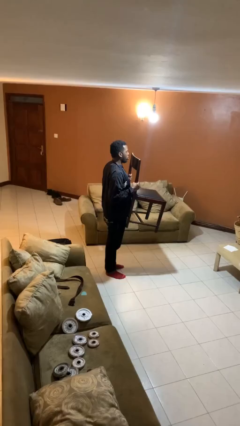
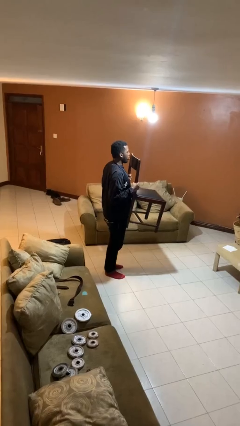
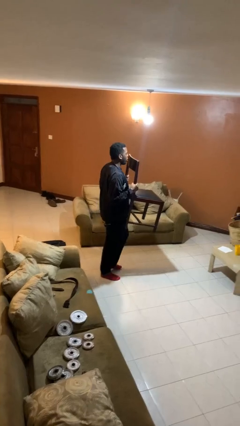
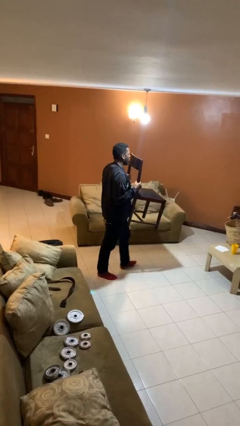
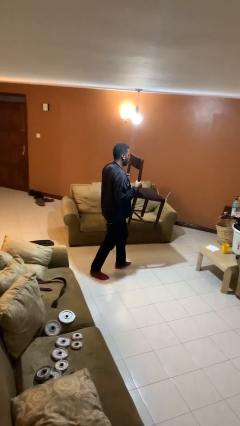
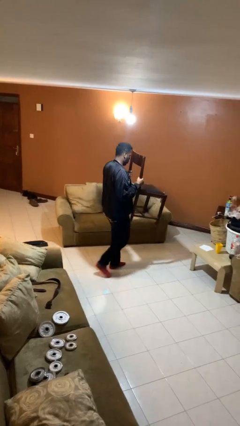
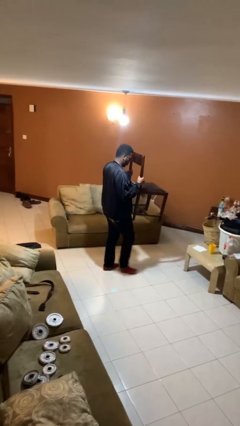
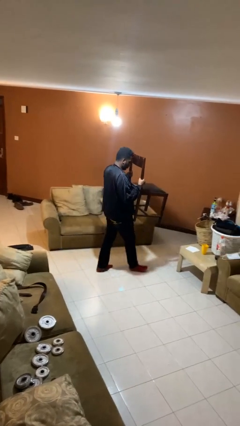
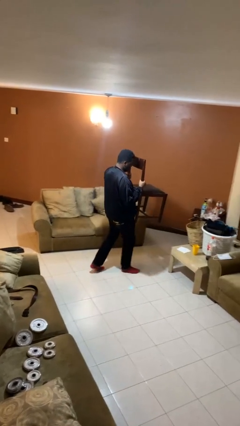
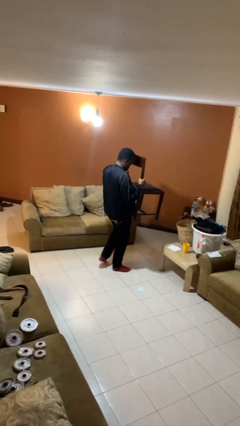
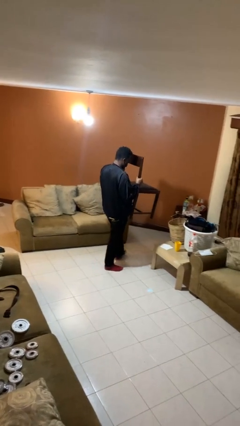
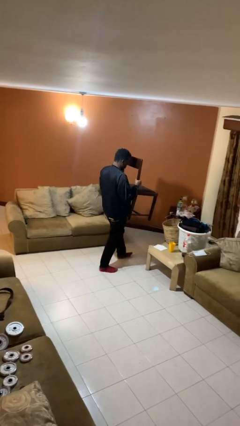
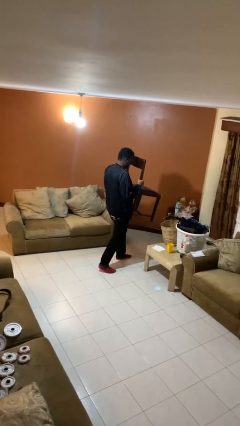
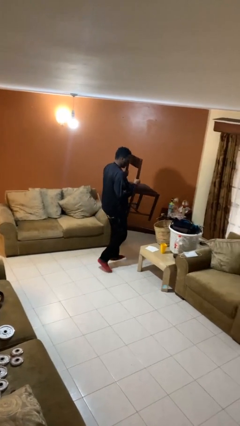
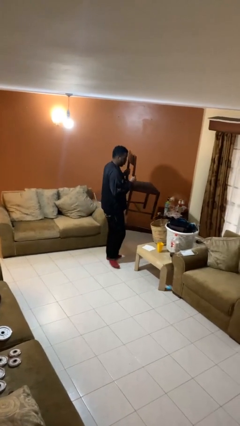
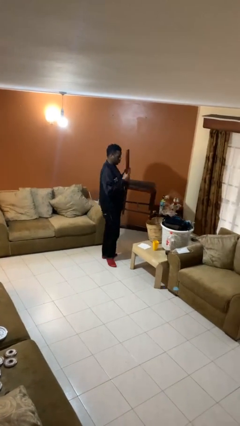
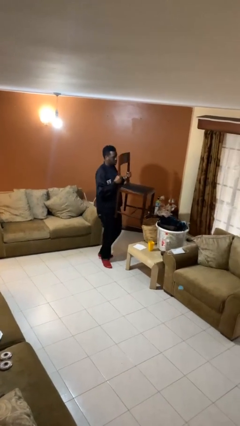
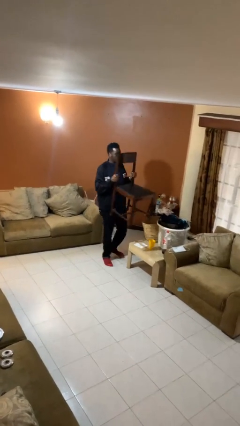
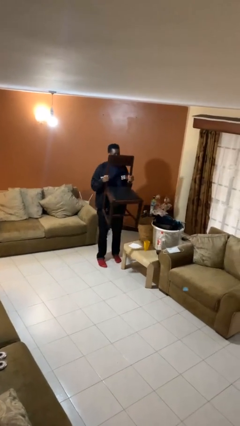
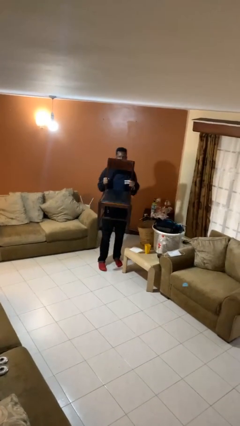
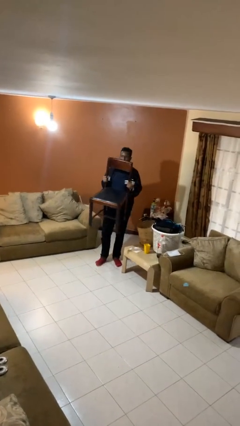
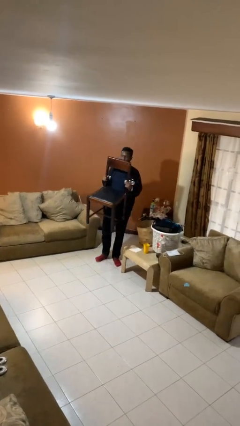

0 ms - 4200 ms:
person carries furniture

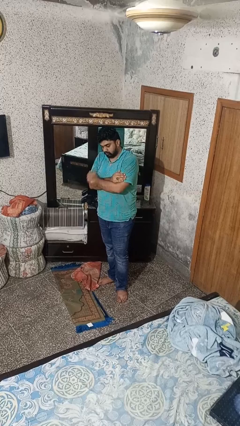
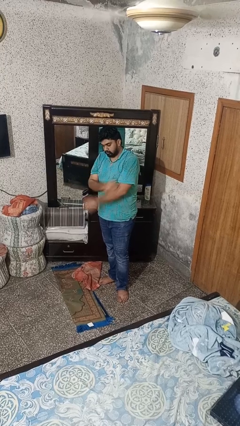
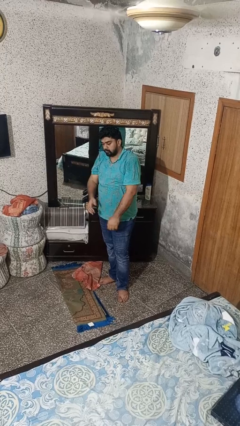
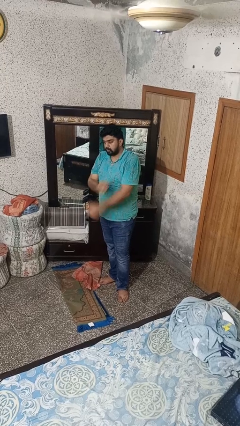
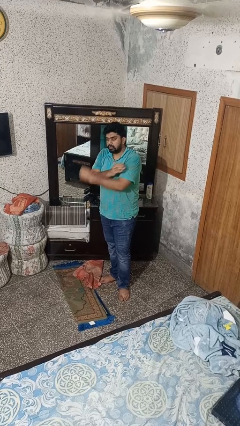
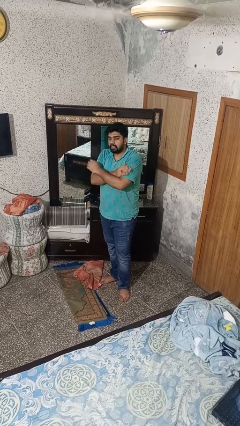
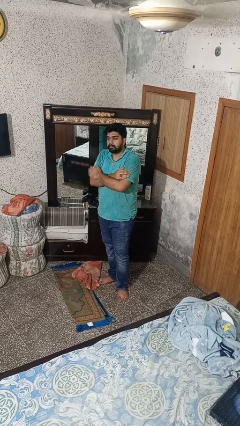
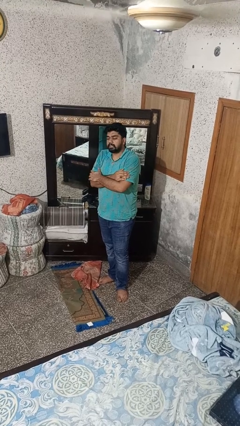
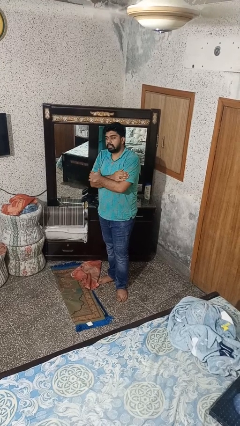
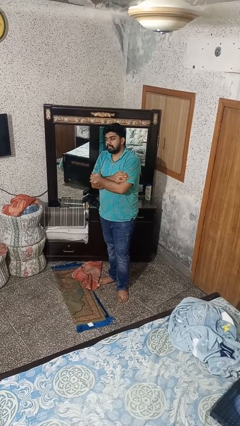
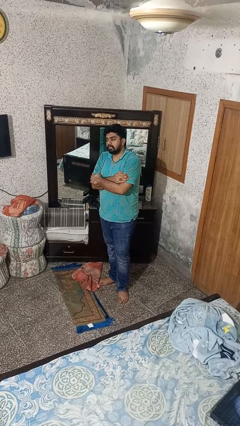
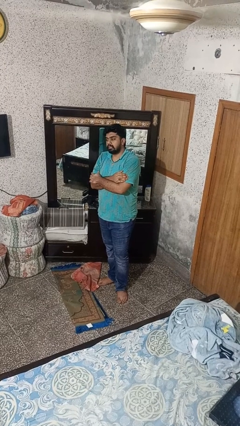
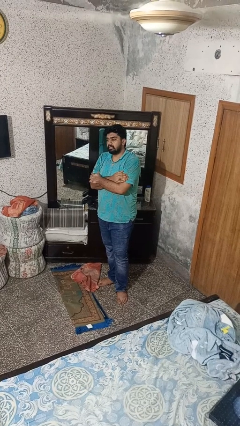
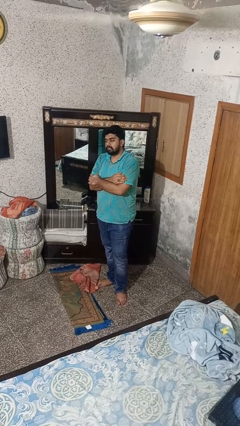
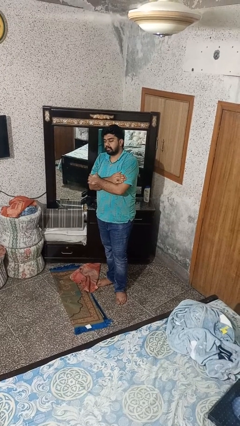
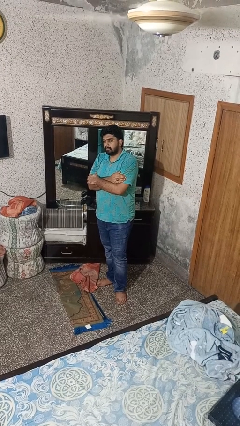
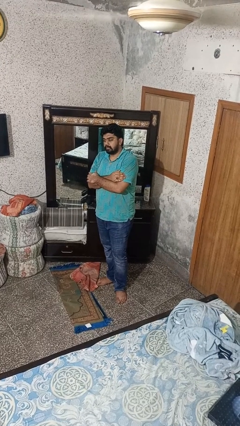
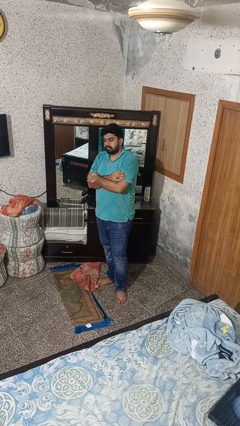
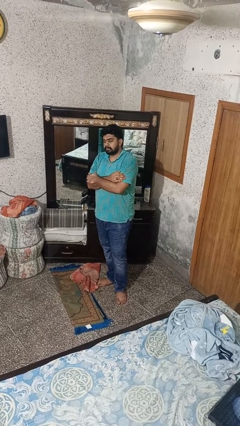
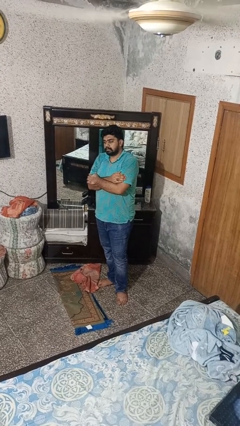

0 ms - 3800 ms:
person crosses arms

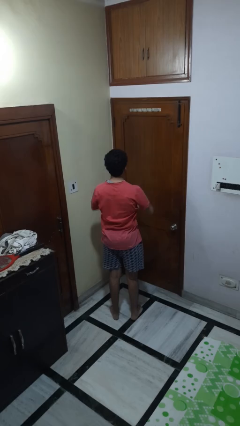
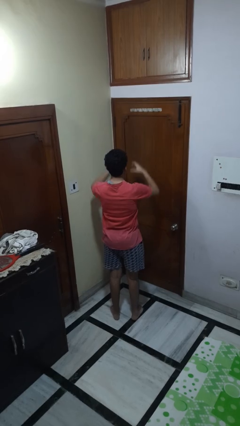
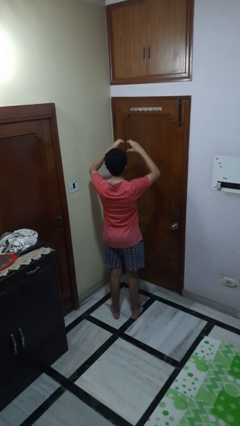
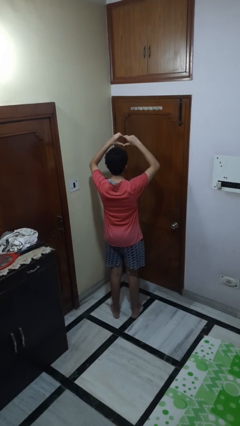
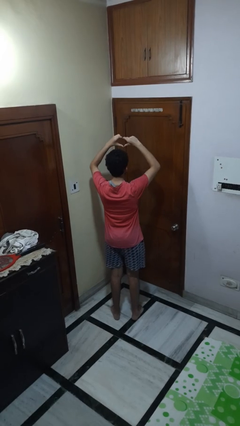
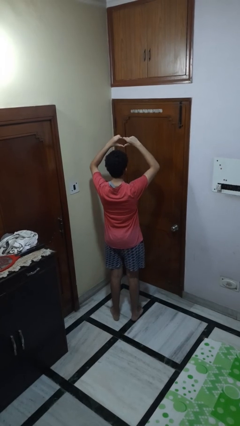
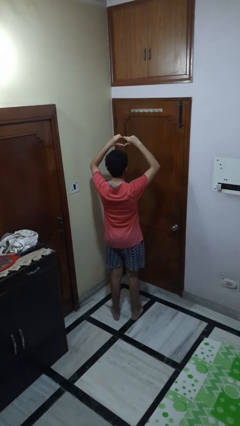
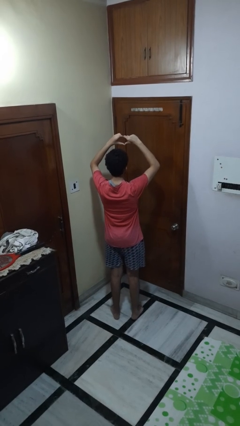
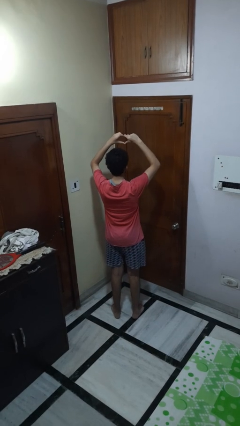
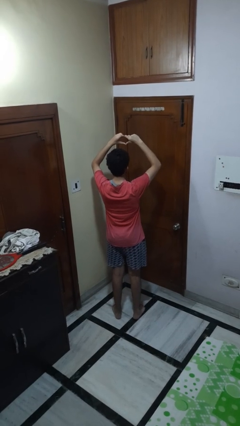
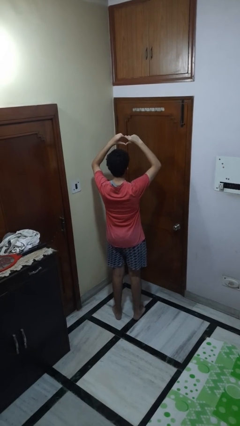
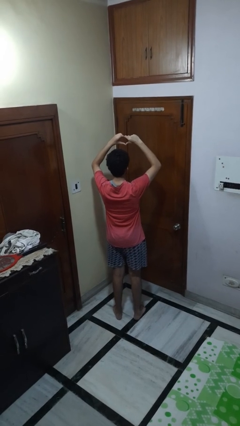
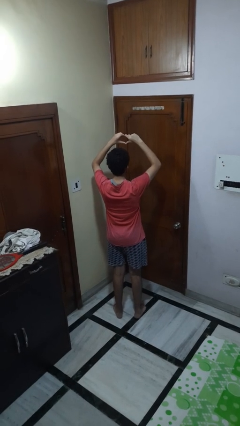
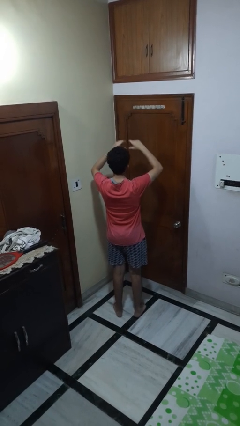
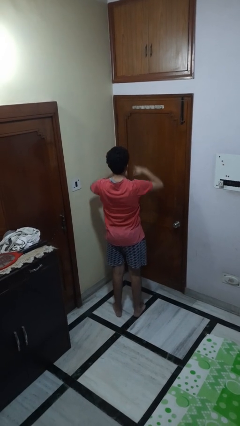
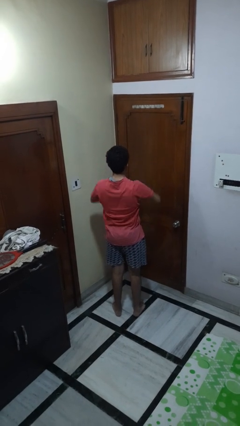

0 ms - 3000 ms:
person gestures heart

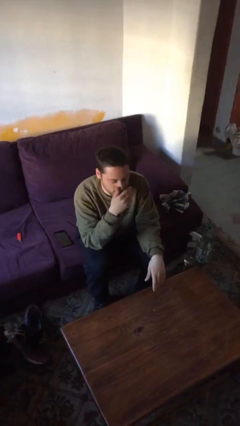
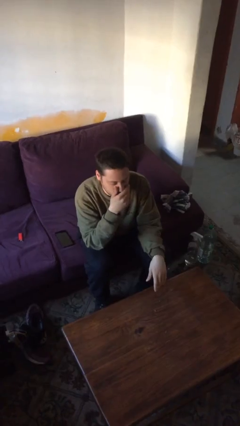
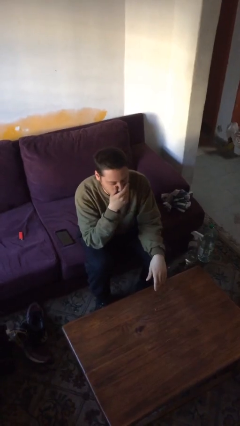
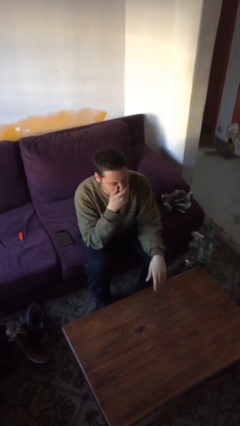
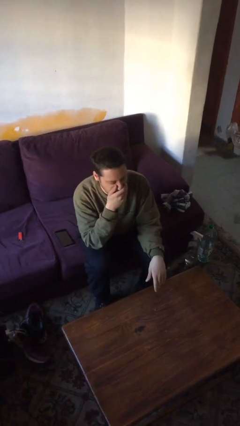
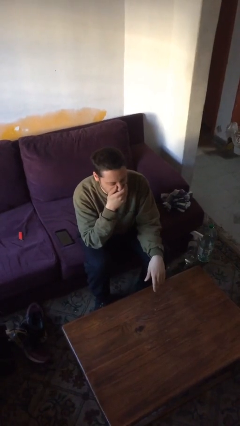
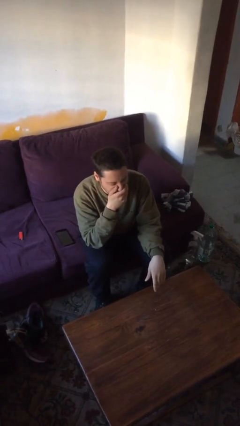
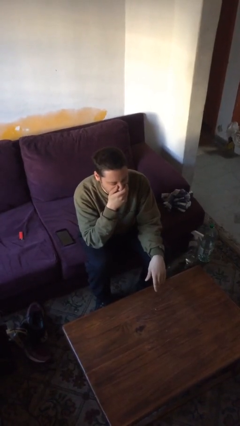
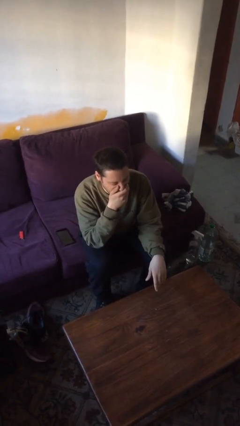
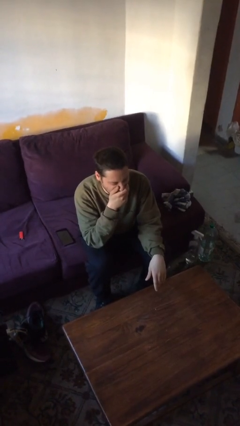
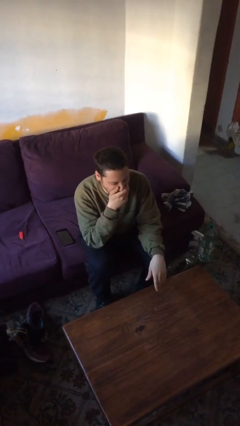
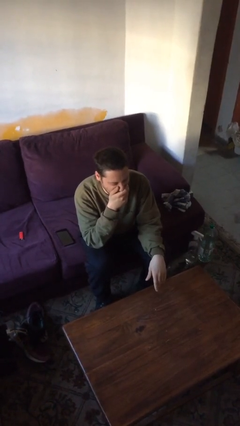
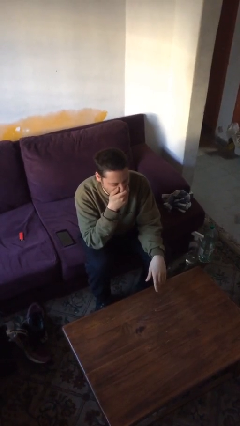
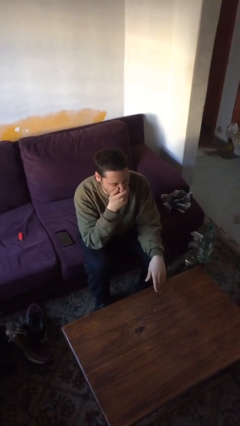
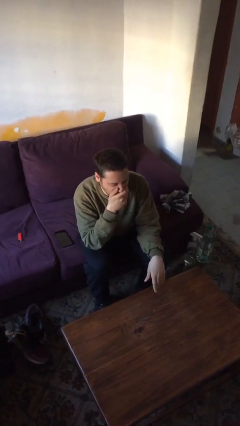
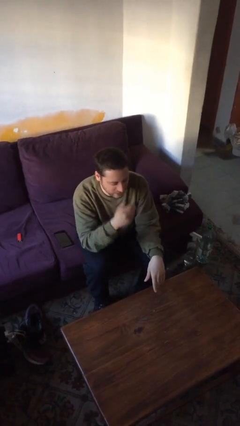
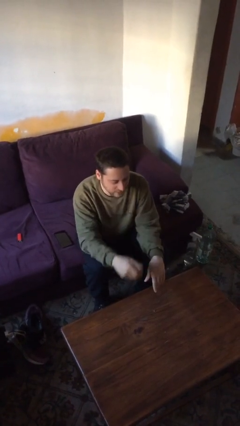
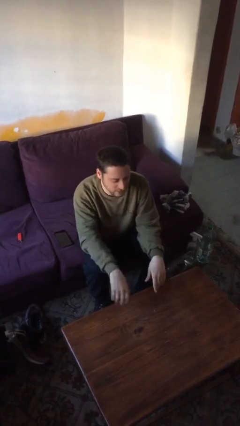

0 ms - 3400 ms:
person yawns

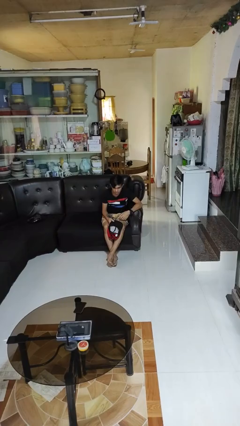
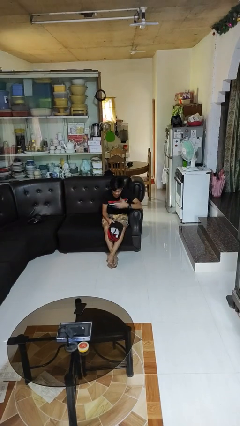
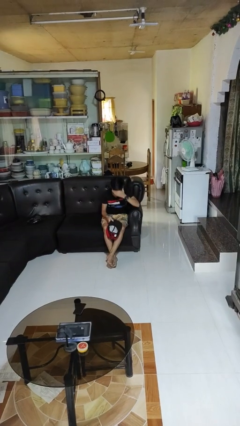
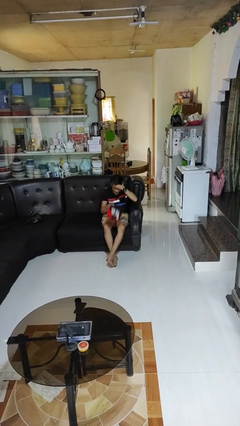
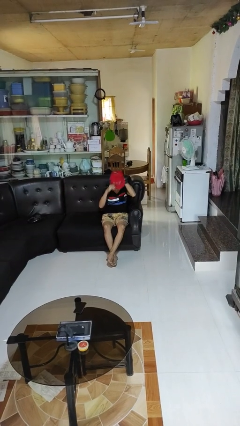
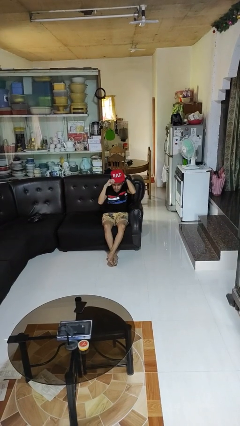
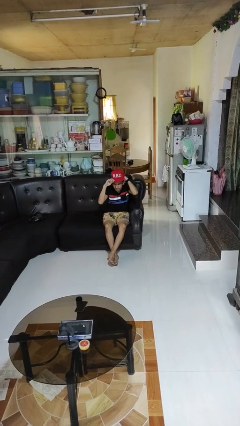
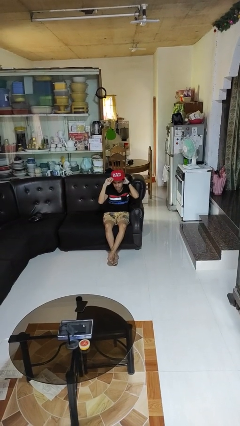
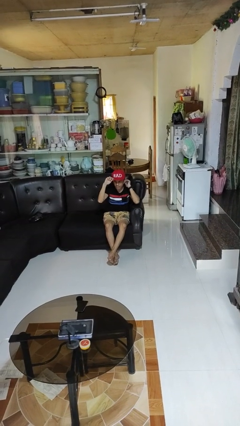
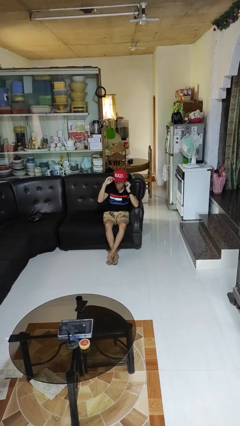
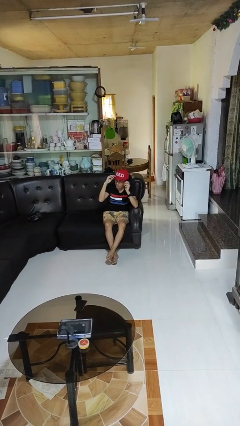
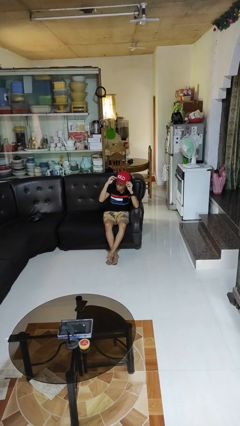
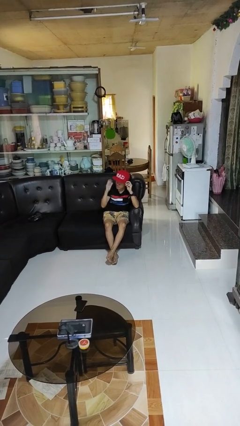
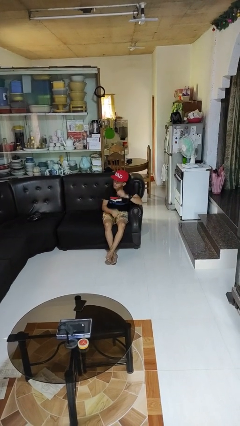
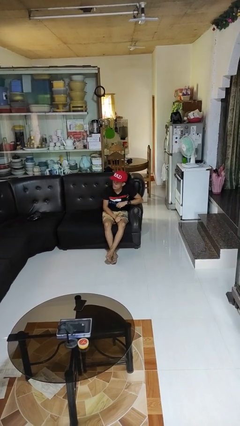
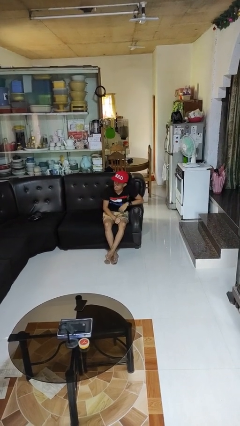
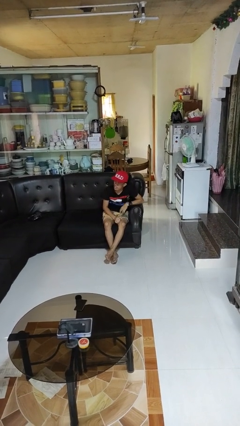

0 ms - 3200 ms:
person puts on hat
